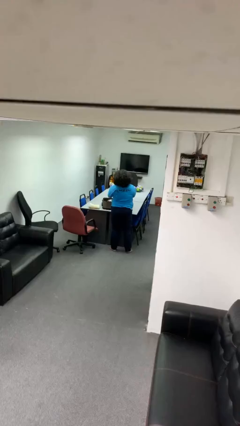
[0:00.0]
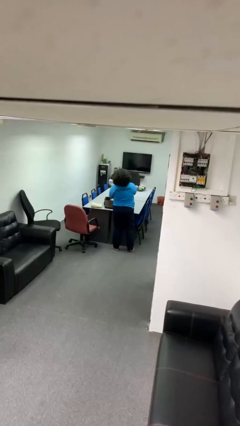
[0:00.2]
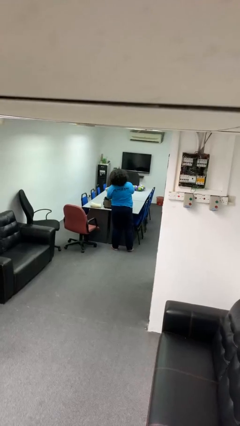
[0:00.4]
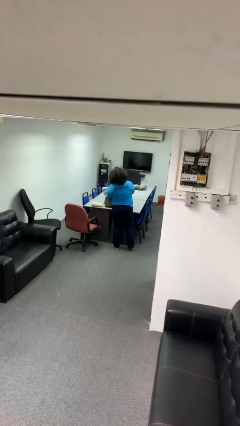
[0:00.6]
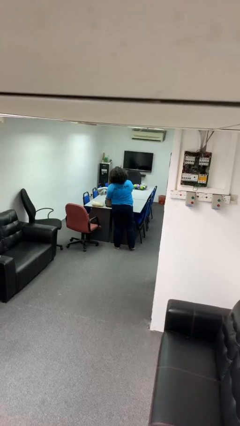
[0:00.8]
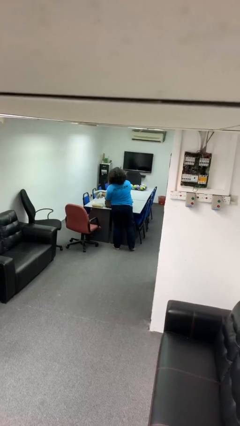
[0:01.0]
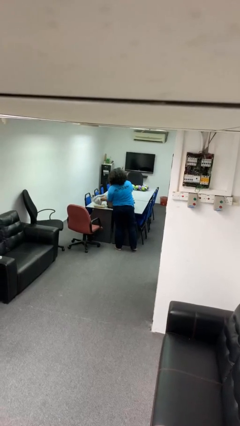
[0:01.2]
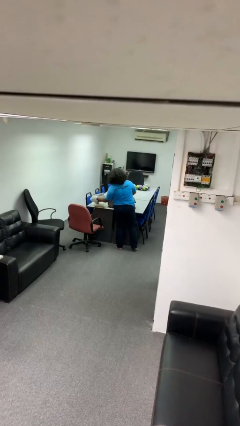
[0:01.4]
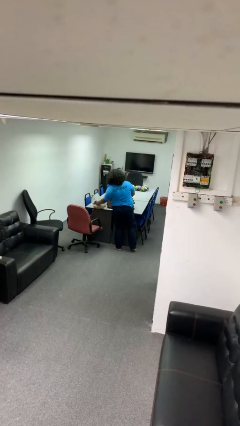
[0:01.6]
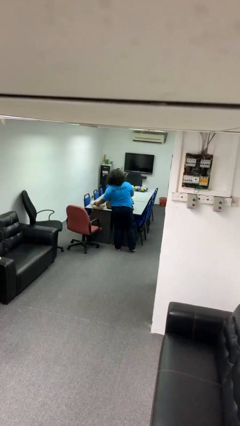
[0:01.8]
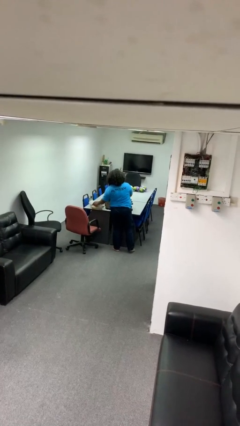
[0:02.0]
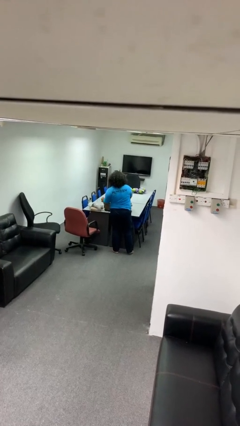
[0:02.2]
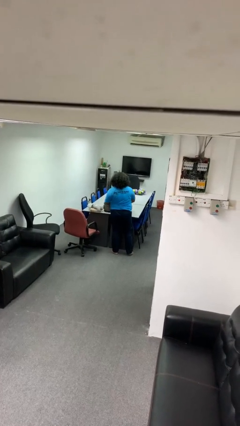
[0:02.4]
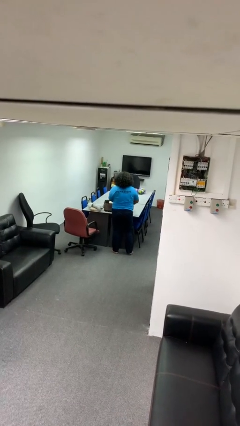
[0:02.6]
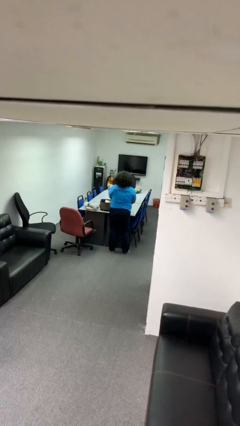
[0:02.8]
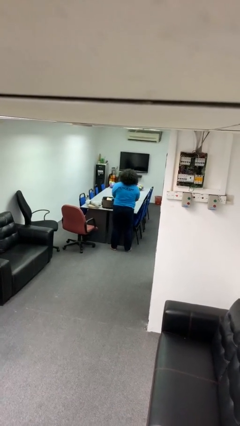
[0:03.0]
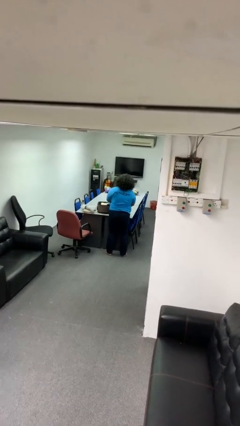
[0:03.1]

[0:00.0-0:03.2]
person unloads clothes from suitcase

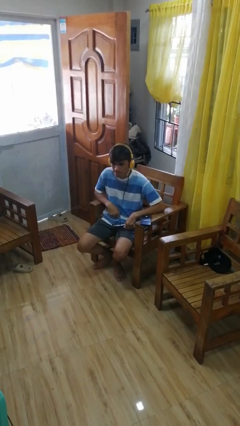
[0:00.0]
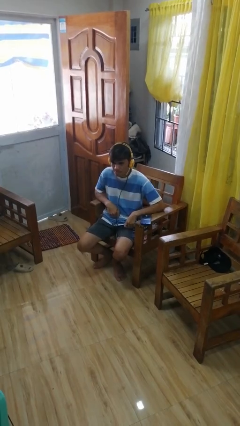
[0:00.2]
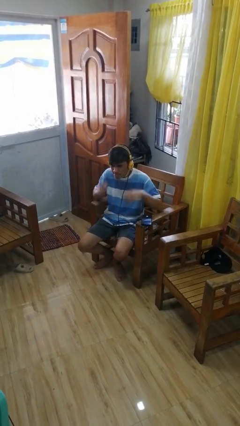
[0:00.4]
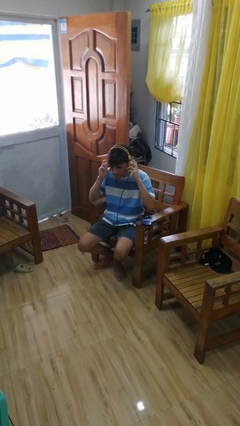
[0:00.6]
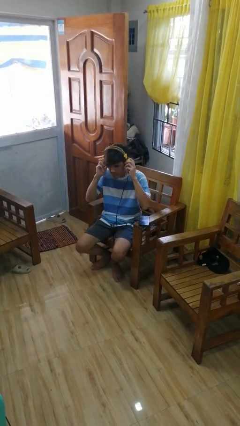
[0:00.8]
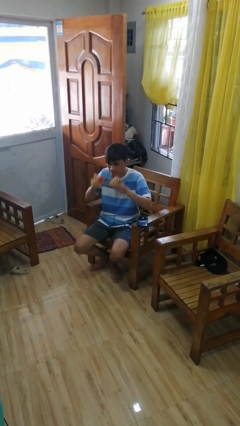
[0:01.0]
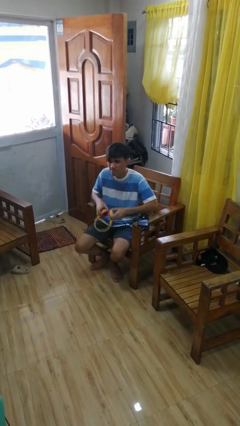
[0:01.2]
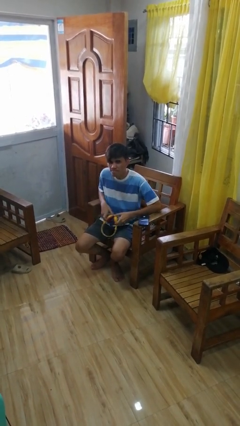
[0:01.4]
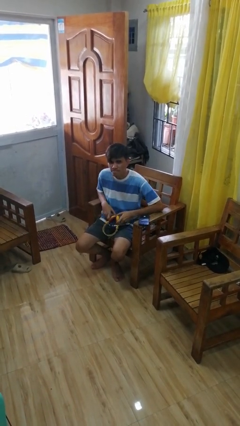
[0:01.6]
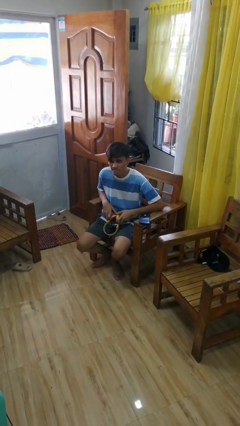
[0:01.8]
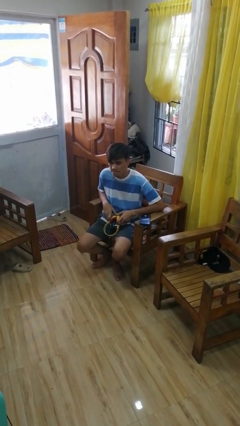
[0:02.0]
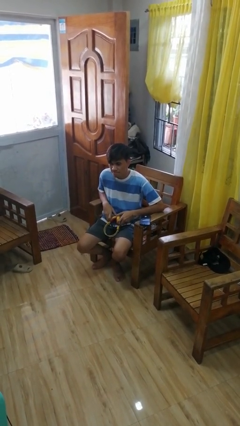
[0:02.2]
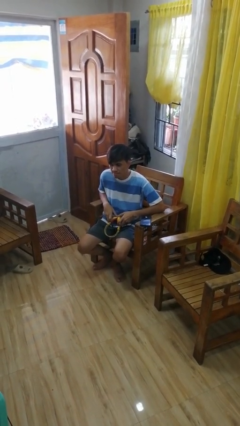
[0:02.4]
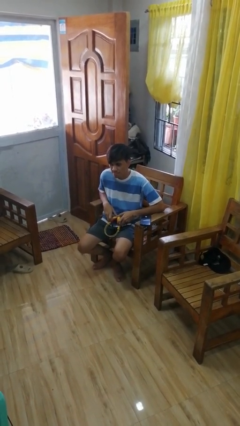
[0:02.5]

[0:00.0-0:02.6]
person takes off headphones

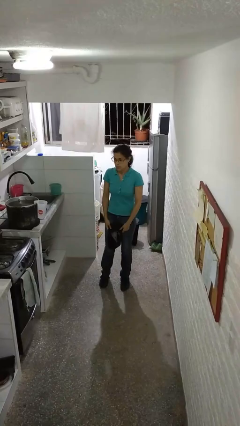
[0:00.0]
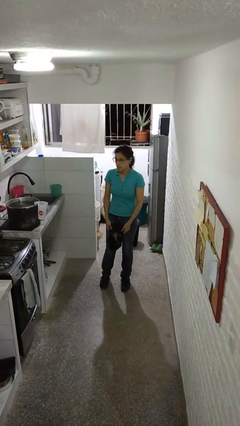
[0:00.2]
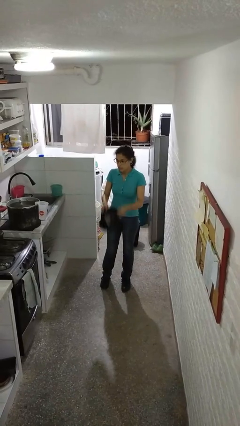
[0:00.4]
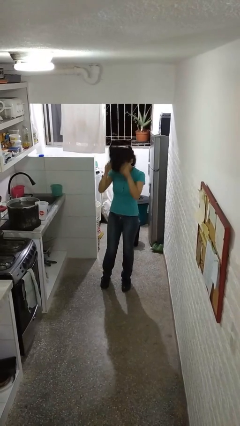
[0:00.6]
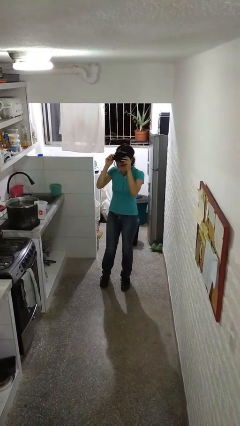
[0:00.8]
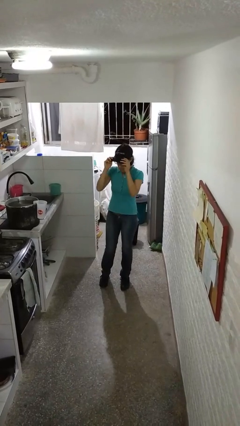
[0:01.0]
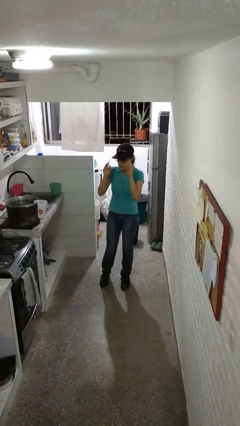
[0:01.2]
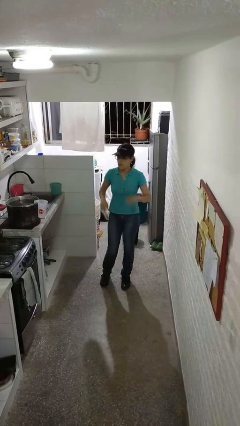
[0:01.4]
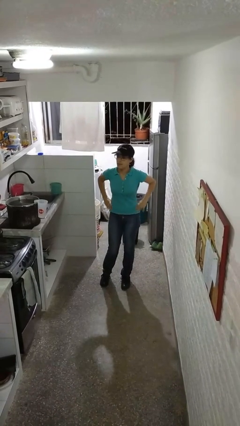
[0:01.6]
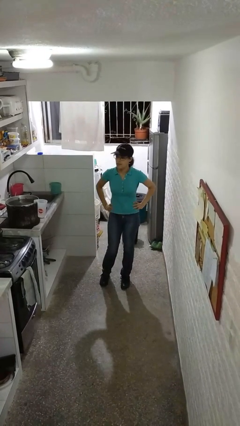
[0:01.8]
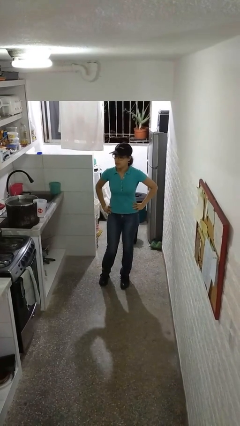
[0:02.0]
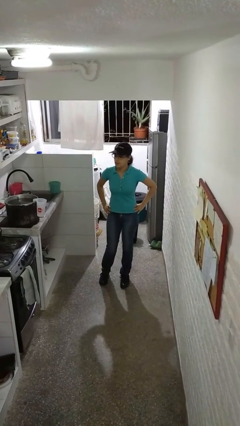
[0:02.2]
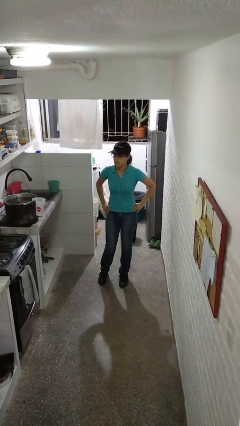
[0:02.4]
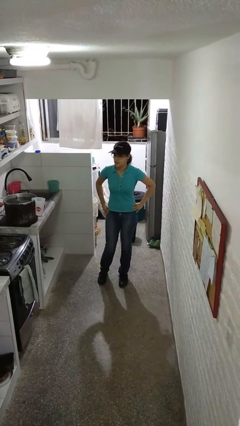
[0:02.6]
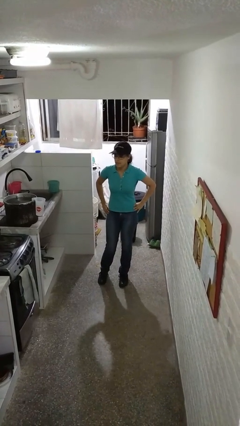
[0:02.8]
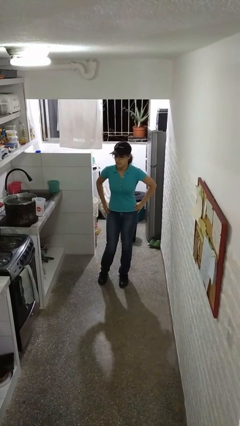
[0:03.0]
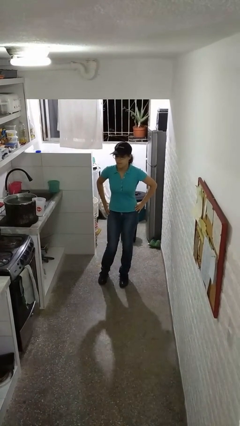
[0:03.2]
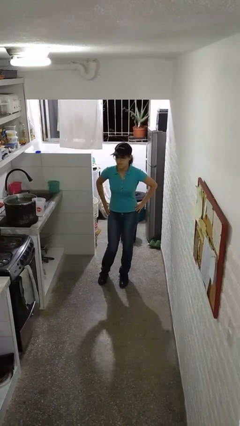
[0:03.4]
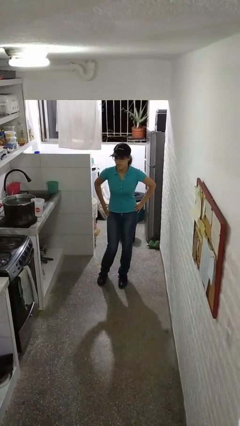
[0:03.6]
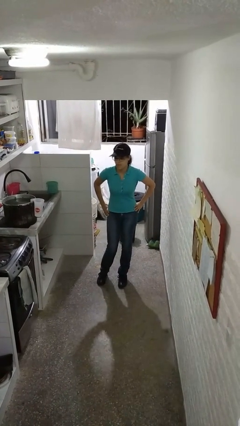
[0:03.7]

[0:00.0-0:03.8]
person puts on hat

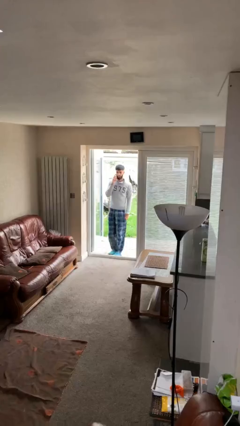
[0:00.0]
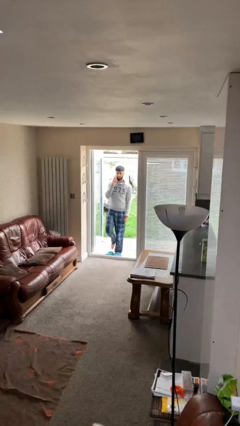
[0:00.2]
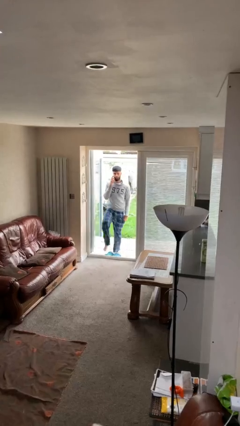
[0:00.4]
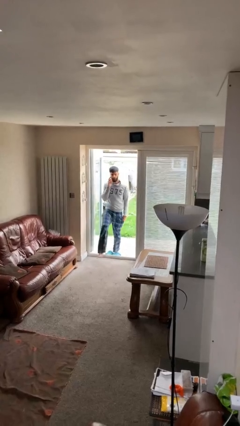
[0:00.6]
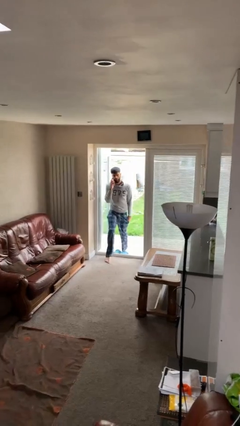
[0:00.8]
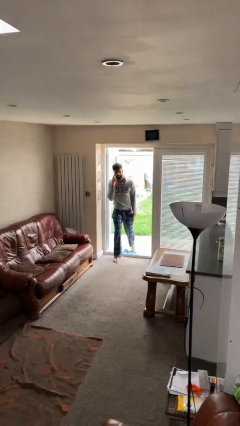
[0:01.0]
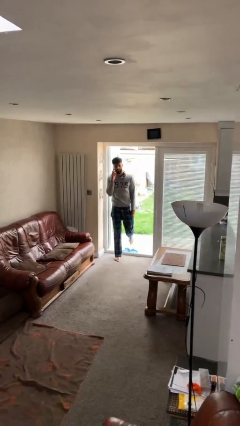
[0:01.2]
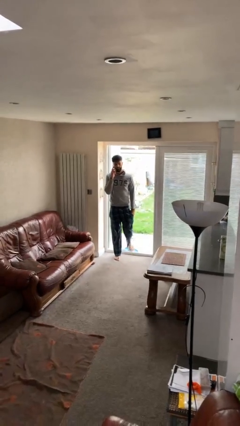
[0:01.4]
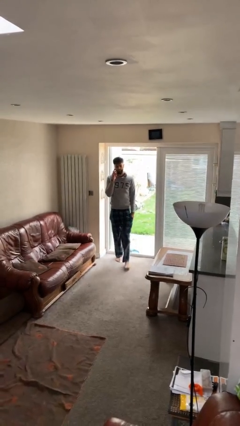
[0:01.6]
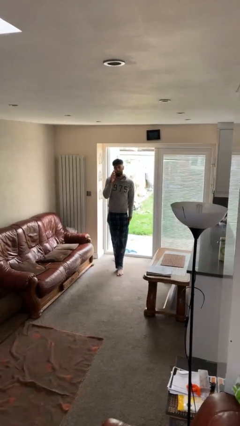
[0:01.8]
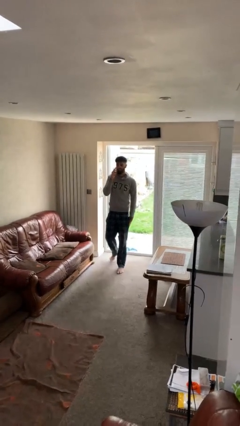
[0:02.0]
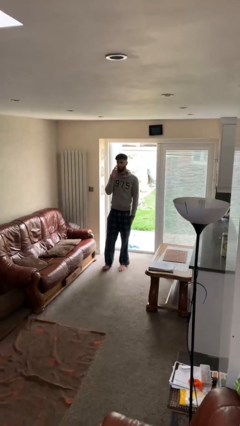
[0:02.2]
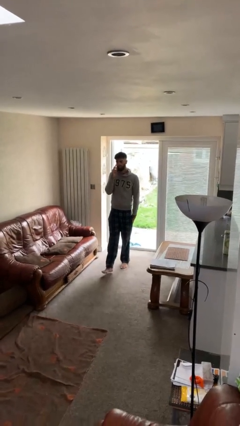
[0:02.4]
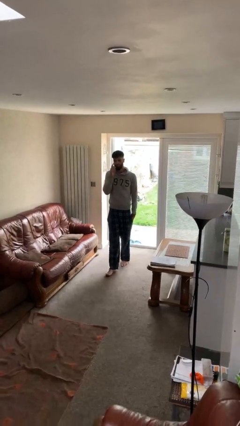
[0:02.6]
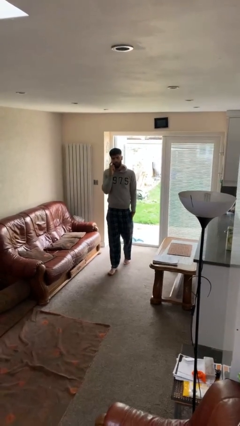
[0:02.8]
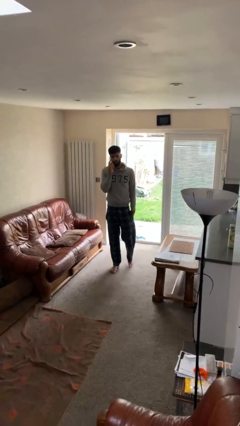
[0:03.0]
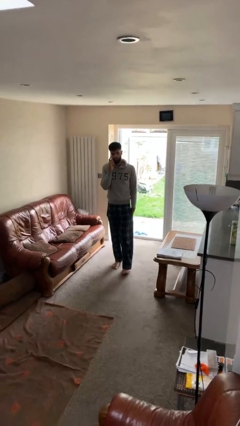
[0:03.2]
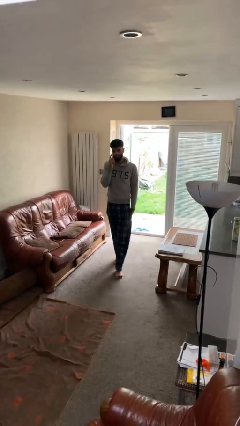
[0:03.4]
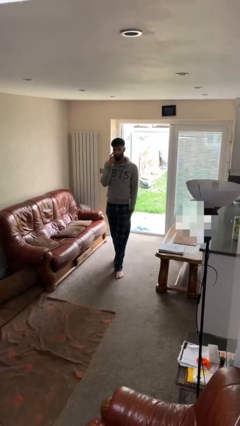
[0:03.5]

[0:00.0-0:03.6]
person enters scene through structure

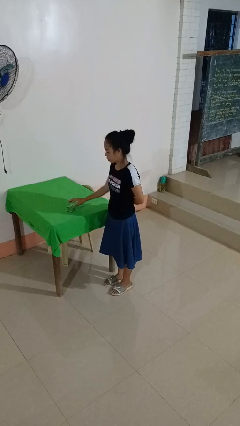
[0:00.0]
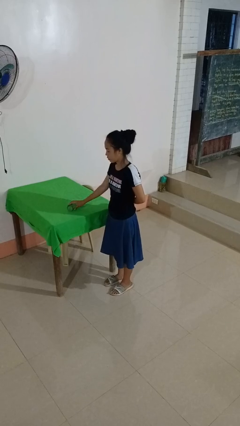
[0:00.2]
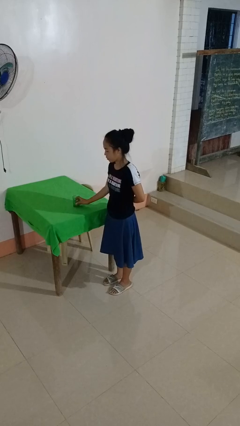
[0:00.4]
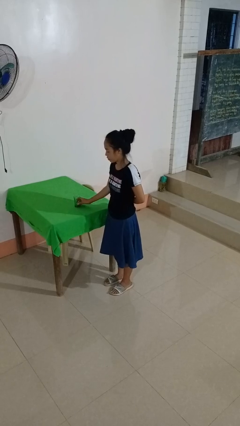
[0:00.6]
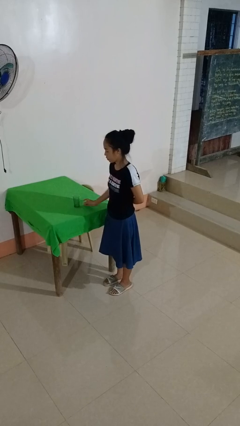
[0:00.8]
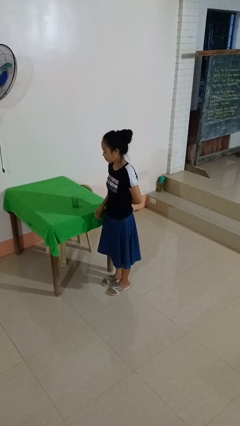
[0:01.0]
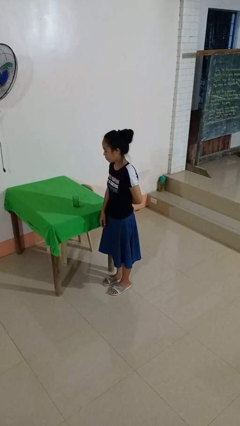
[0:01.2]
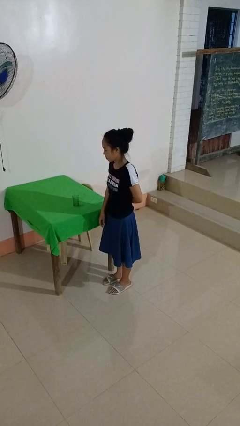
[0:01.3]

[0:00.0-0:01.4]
person sets upright glass

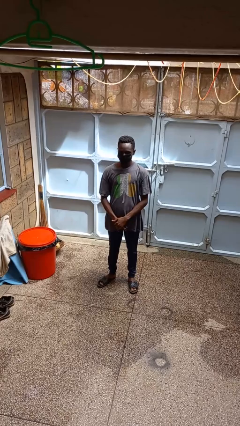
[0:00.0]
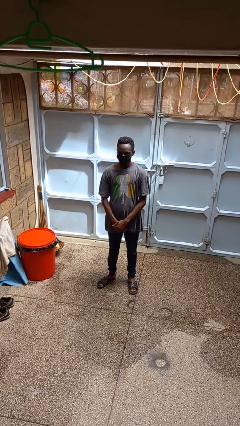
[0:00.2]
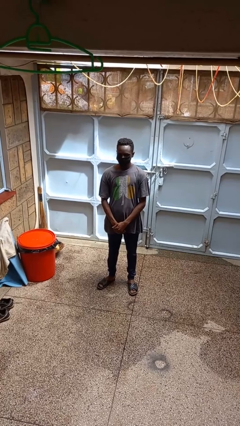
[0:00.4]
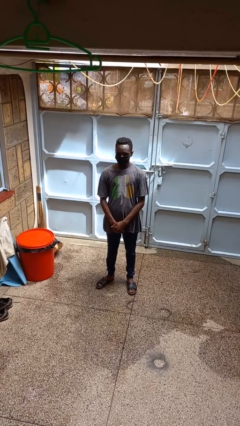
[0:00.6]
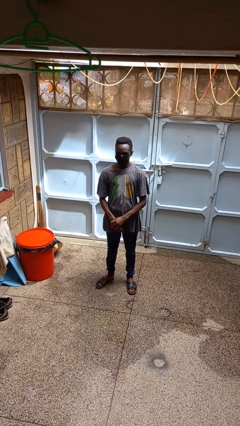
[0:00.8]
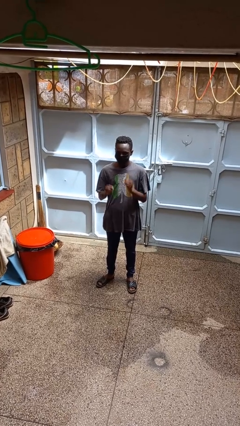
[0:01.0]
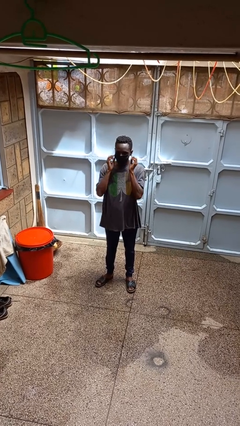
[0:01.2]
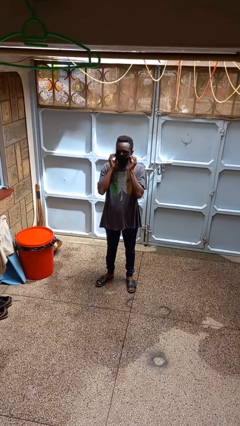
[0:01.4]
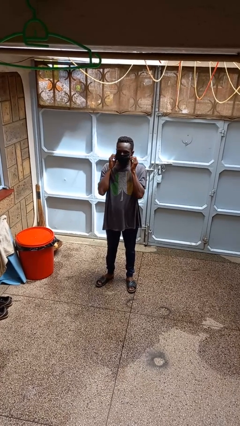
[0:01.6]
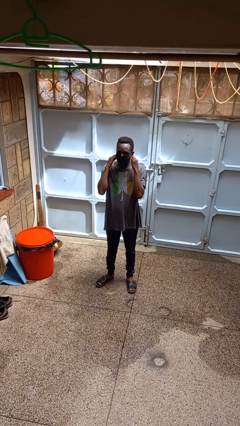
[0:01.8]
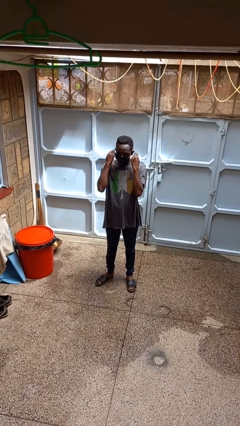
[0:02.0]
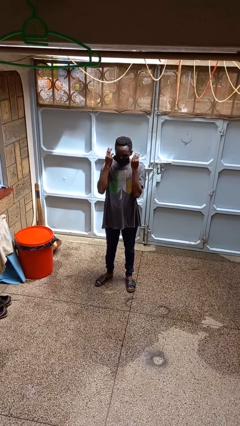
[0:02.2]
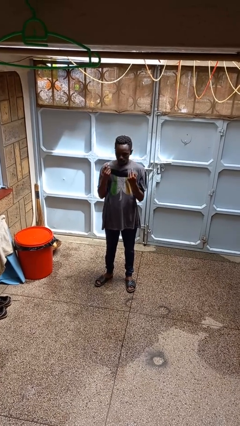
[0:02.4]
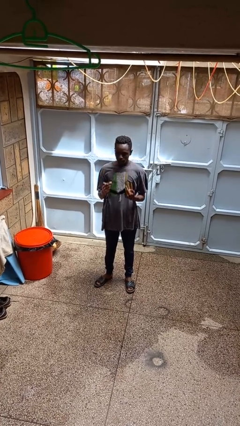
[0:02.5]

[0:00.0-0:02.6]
person takes off facemask
